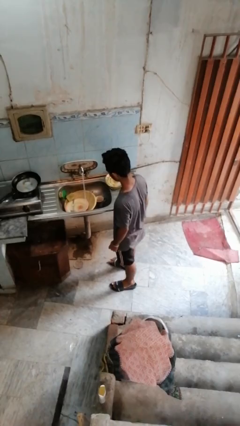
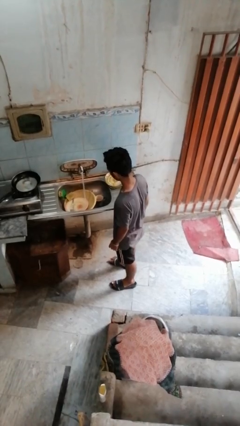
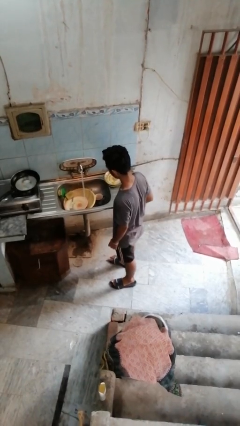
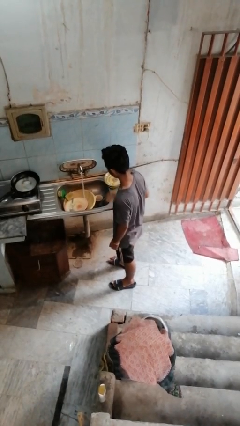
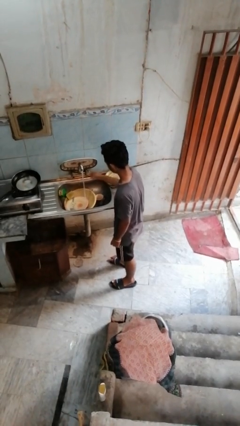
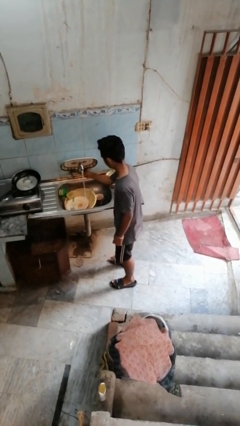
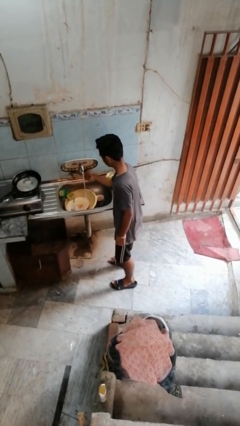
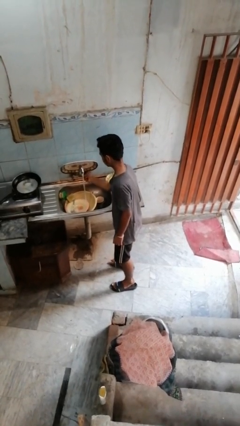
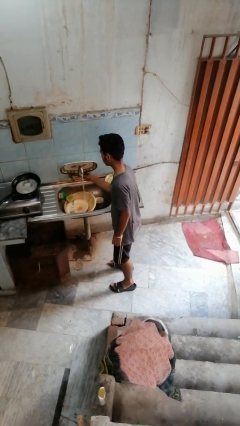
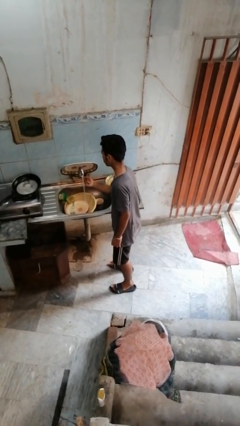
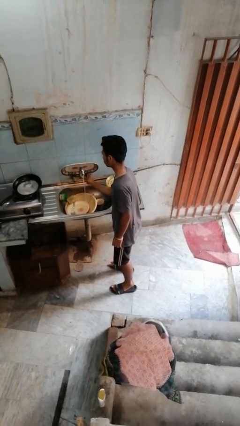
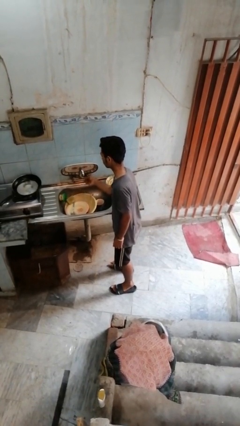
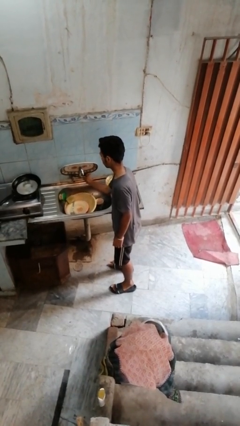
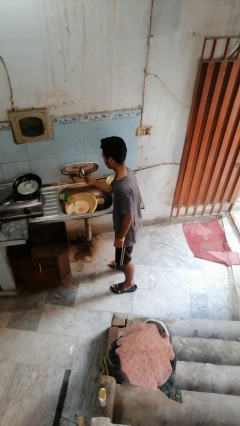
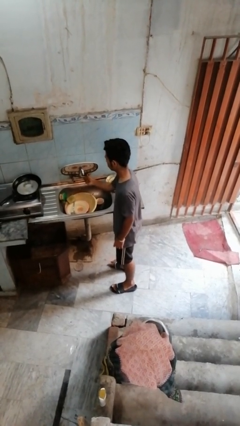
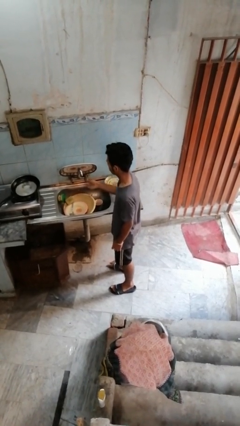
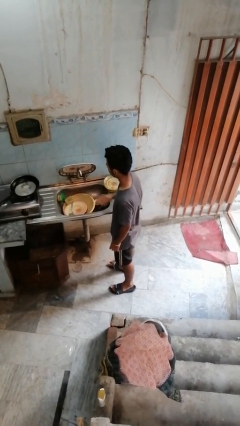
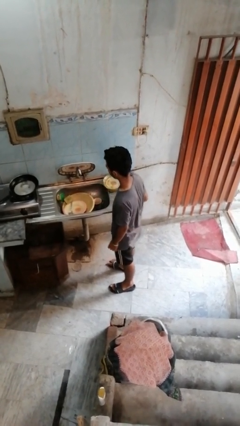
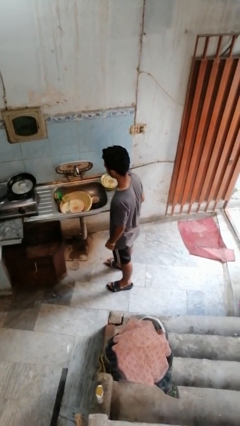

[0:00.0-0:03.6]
person turns off faucet

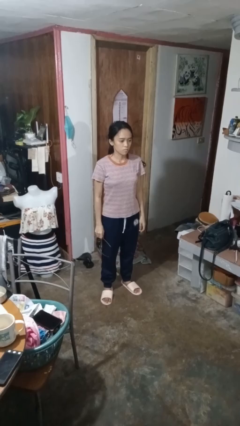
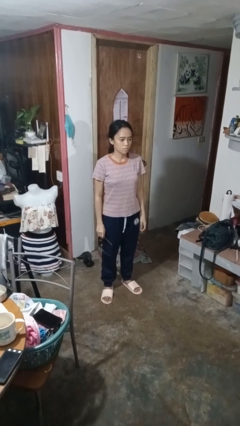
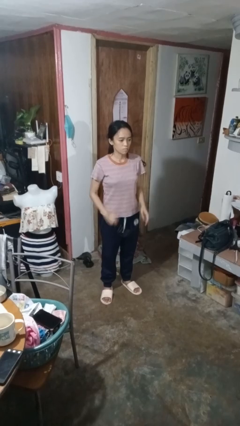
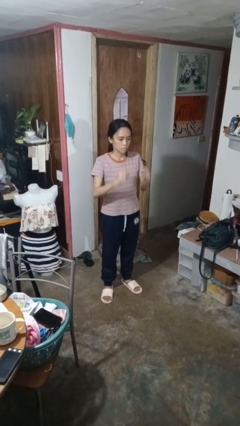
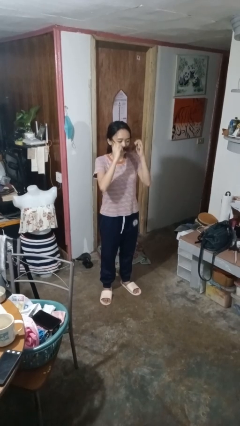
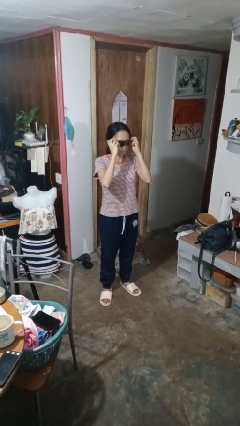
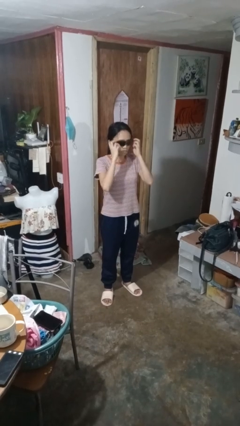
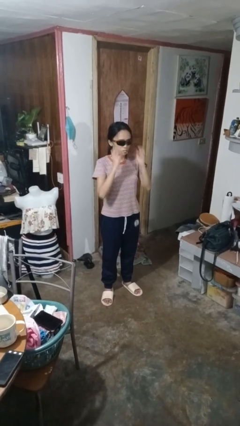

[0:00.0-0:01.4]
person puts on sunglasses

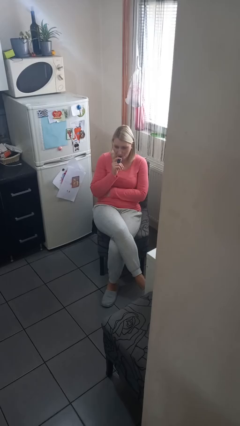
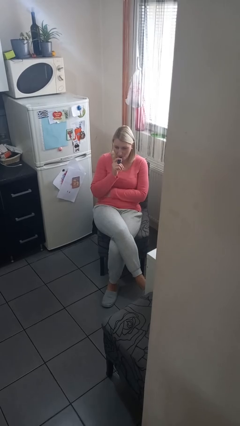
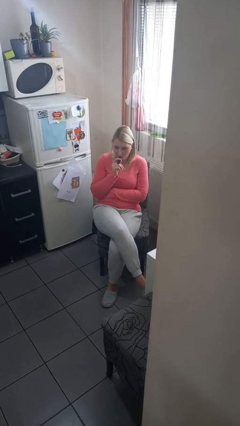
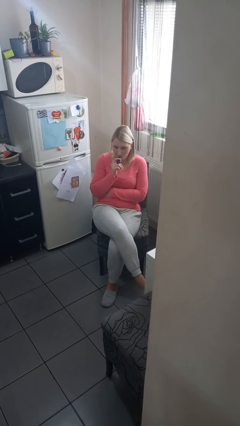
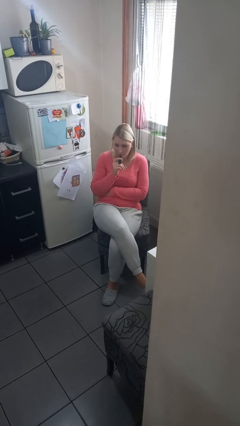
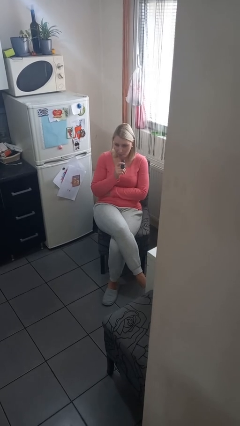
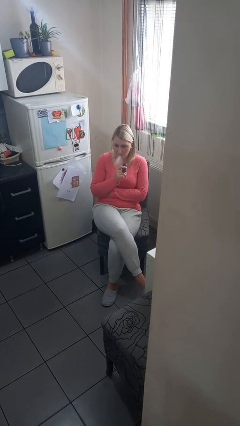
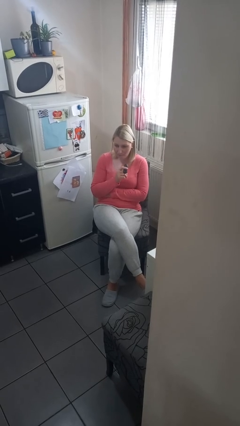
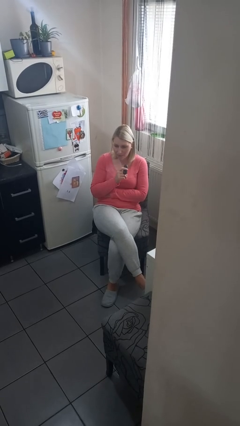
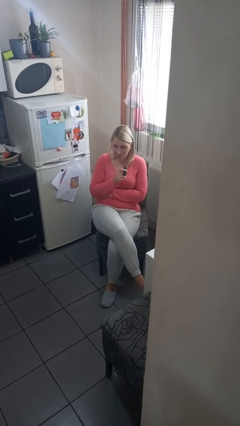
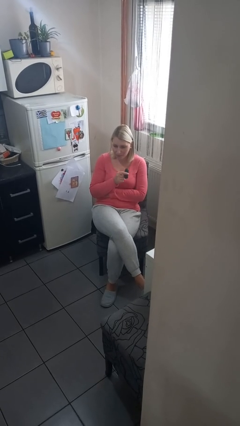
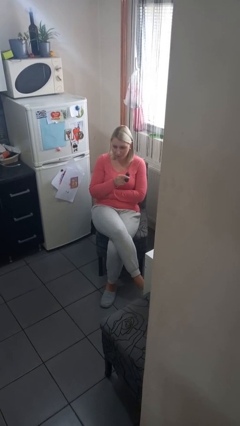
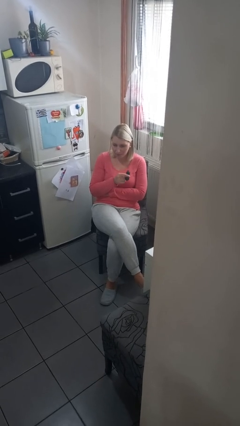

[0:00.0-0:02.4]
person vapes

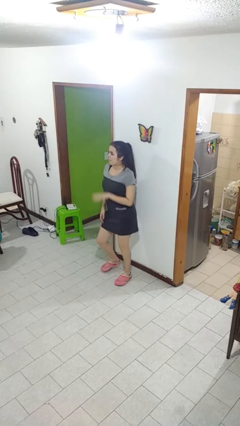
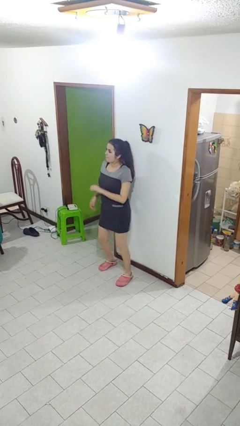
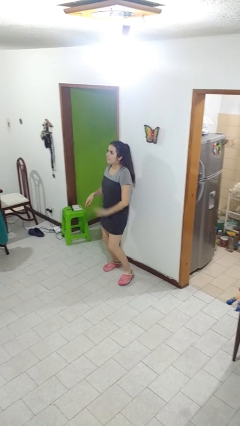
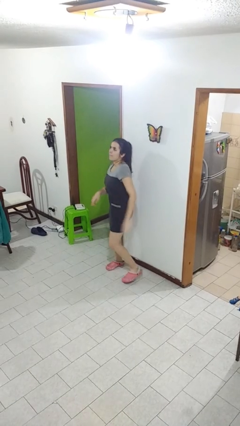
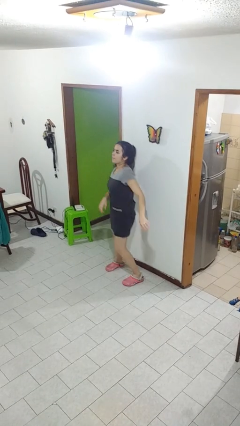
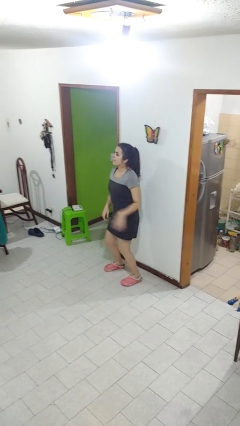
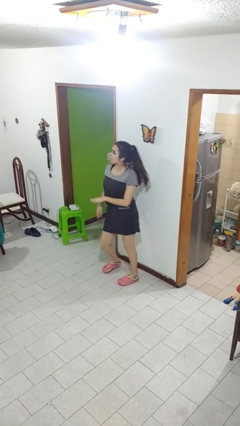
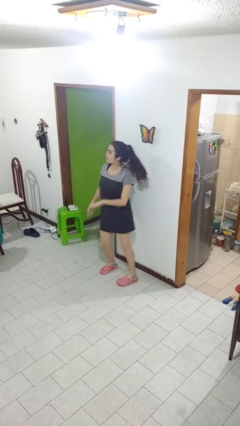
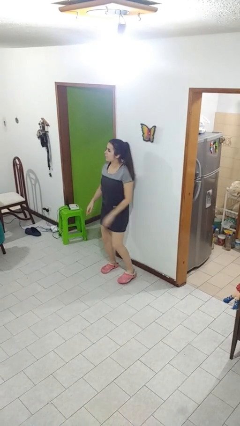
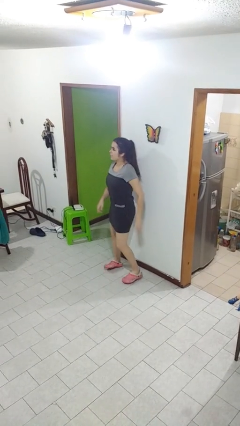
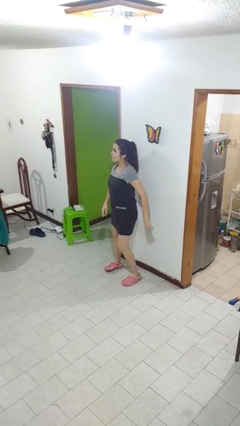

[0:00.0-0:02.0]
person dances in place

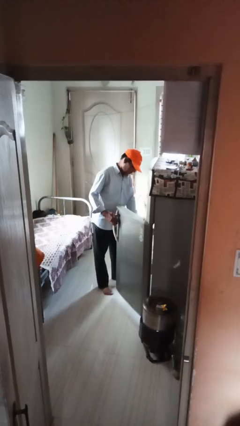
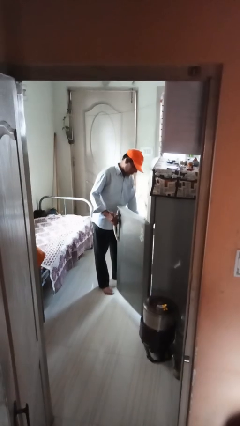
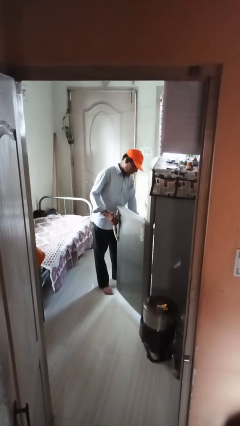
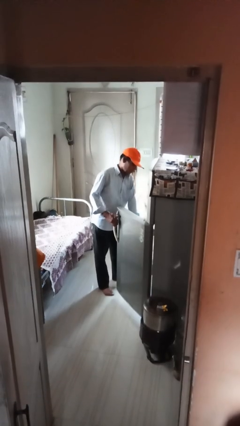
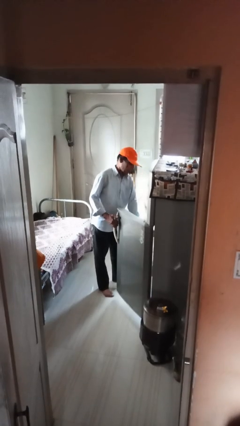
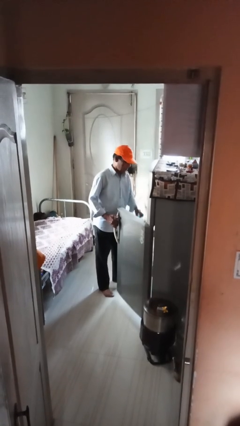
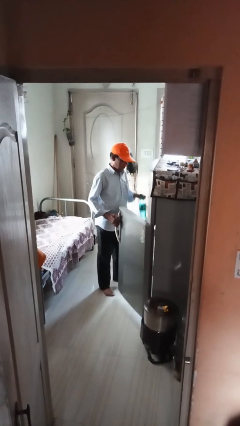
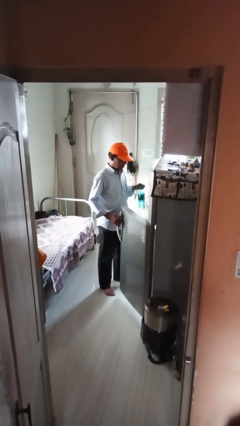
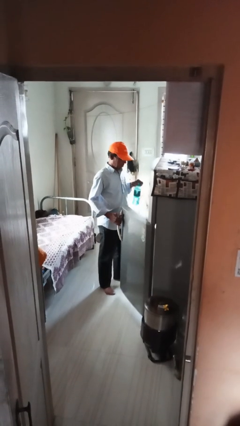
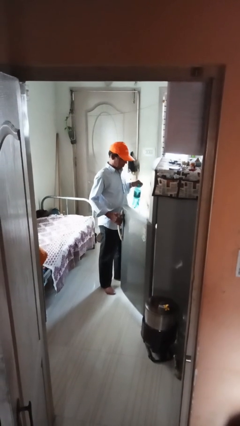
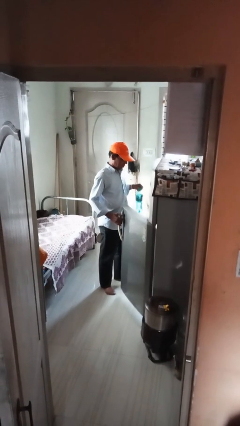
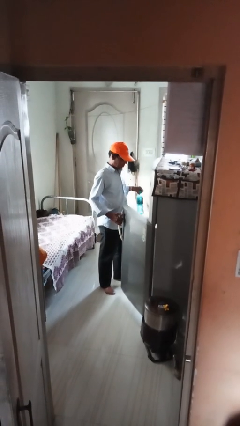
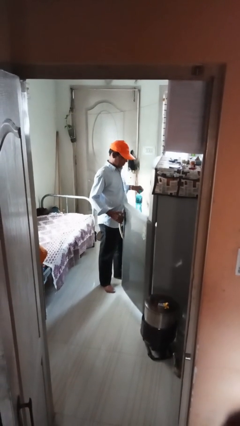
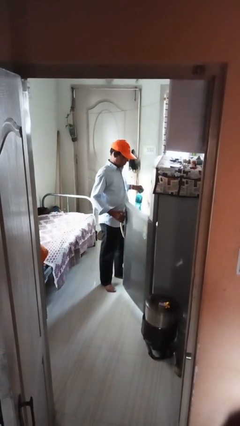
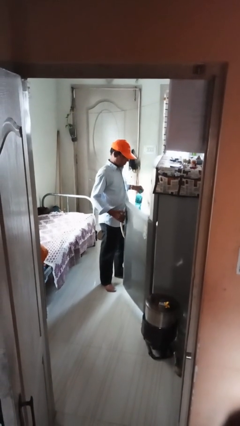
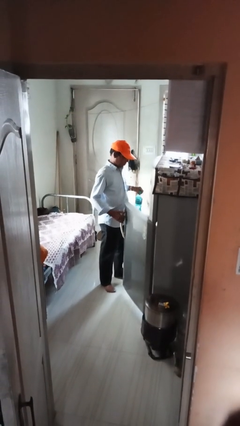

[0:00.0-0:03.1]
person takes object from refrigerator

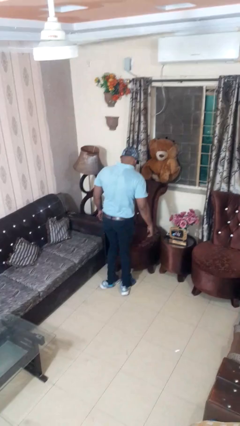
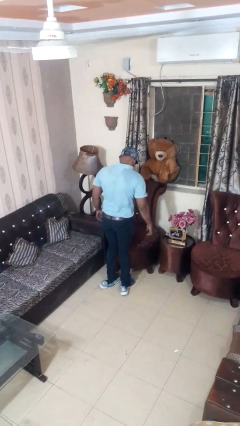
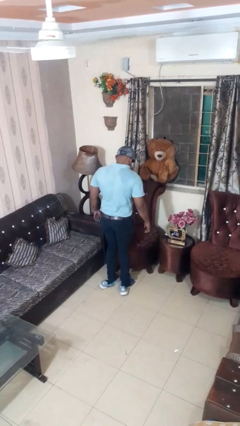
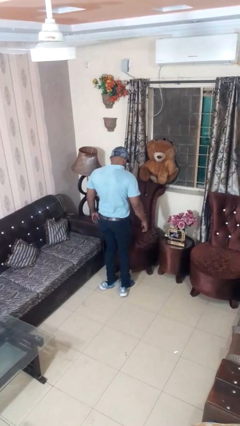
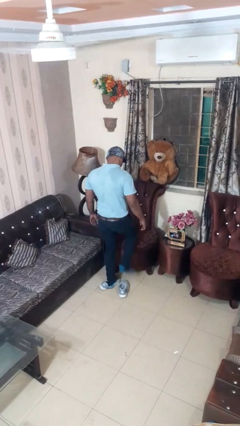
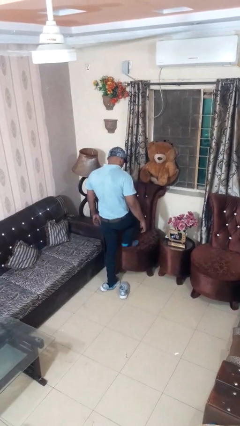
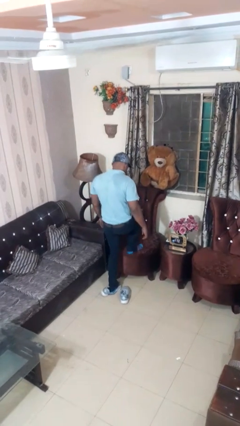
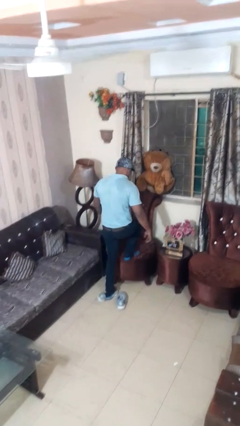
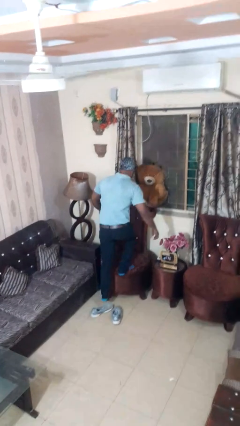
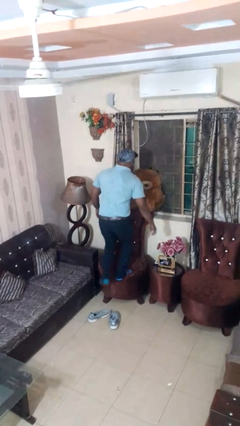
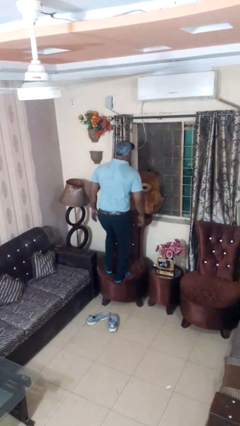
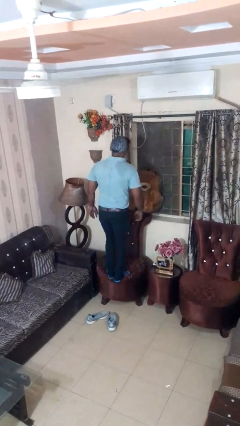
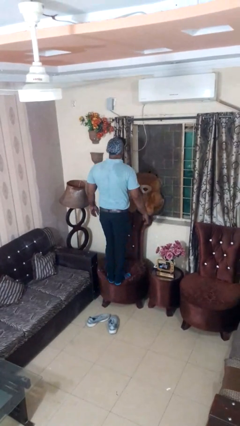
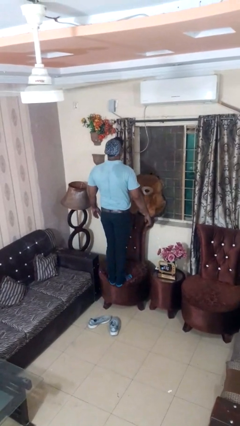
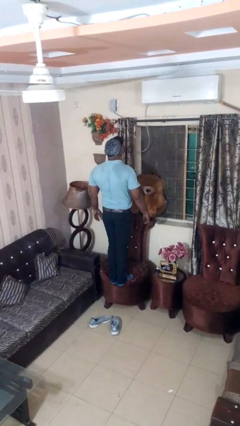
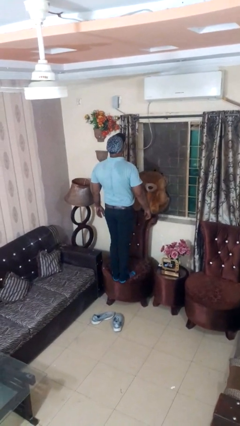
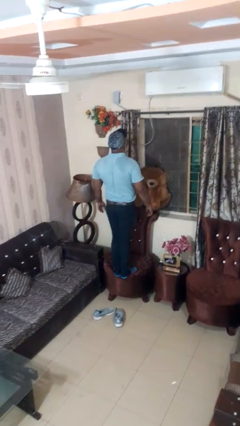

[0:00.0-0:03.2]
person climbs on chair

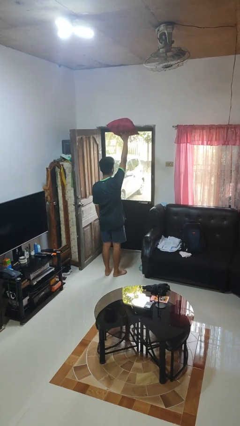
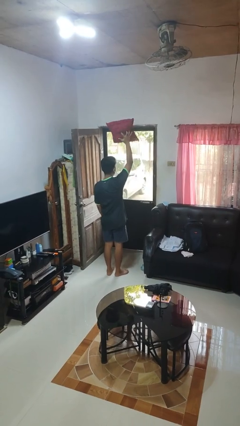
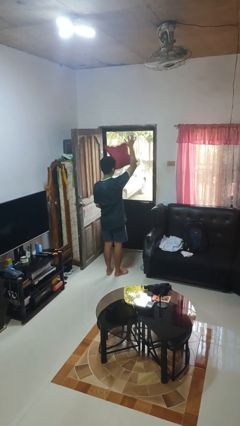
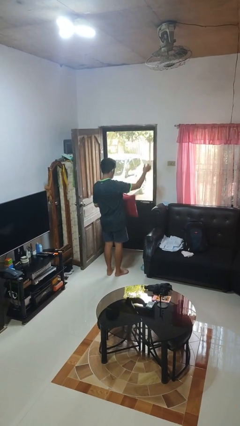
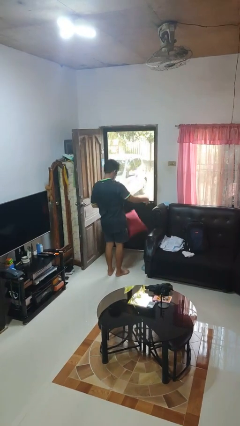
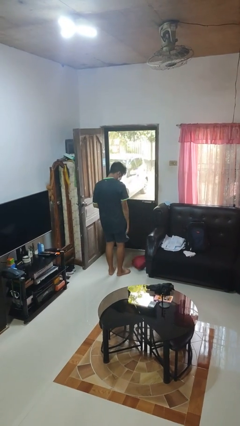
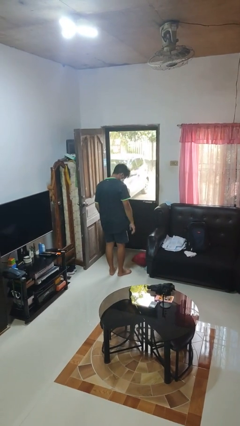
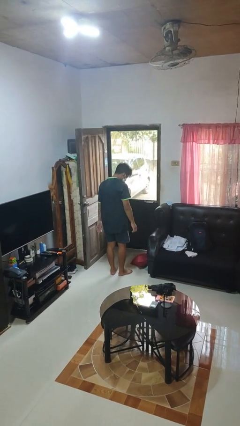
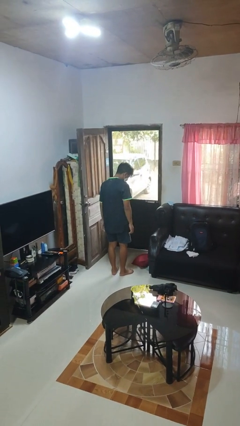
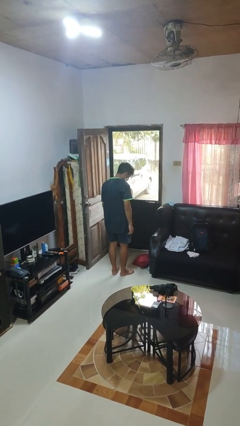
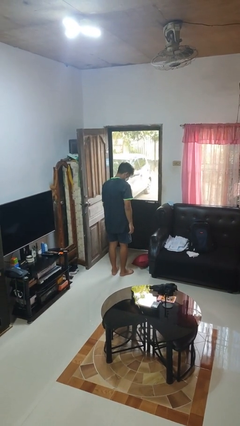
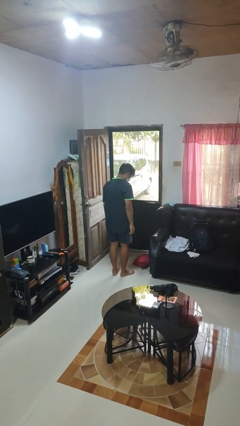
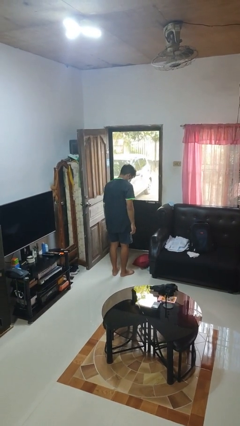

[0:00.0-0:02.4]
person drops object
